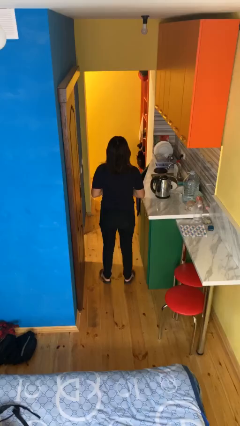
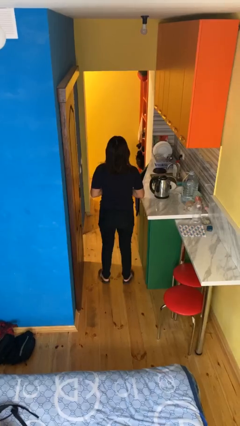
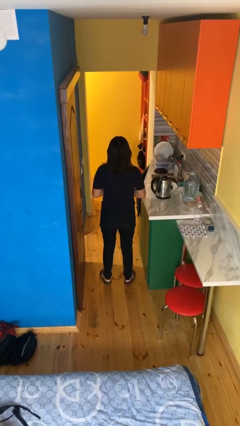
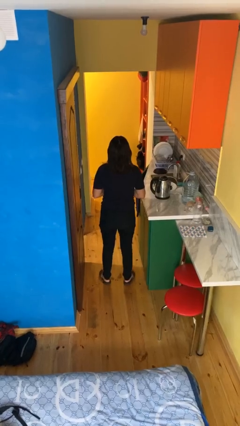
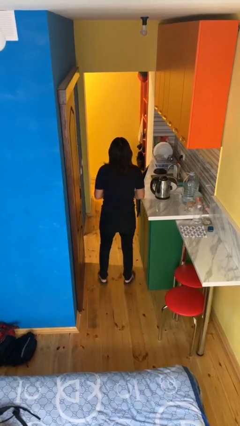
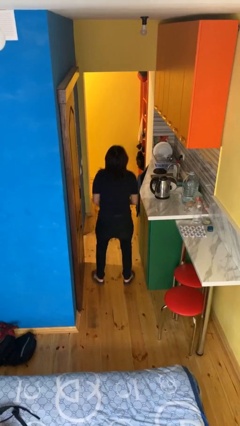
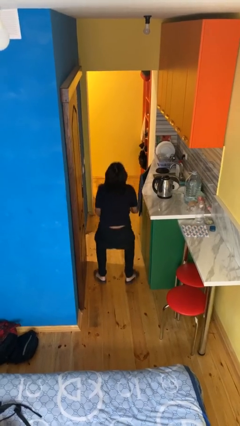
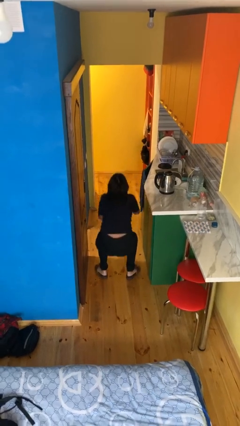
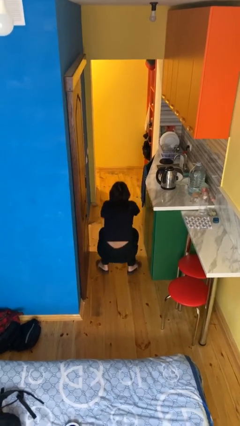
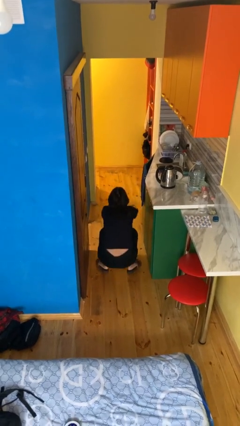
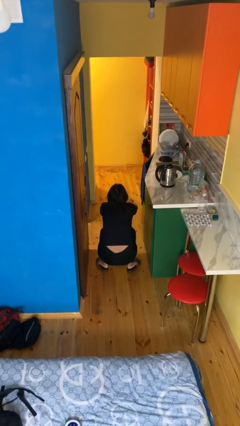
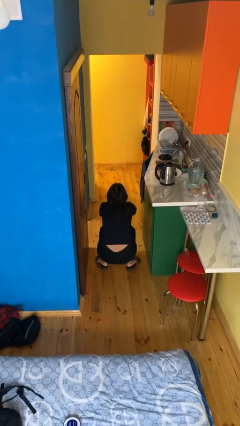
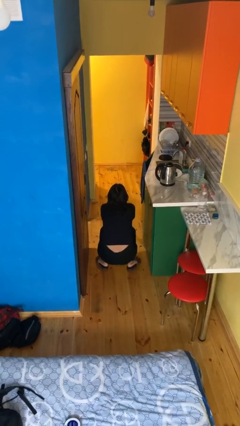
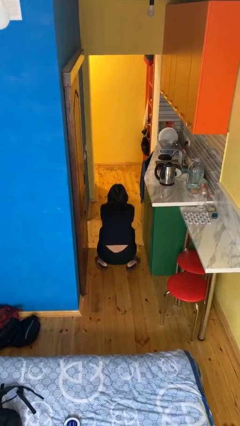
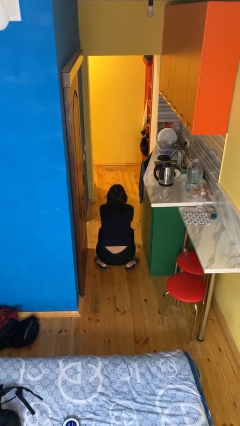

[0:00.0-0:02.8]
person squats

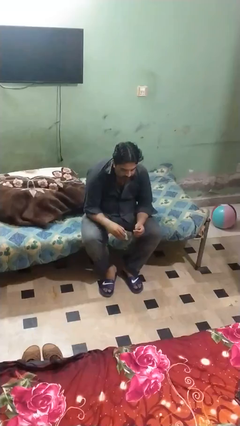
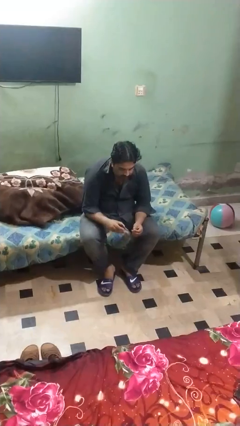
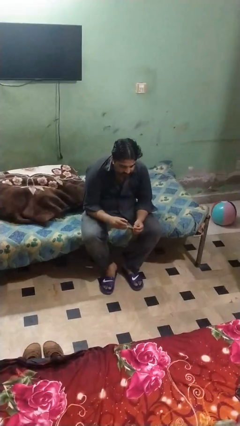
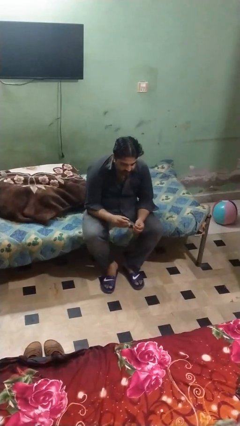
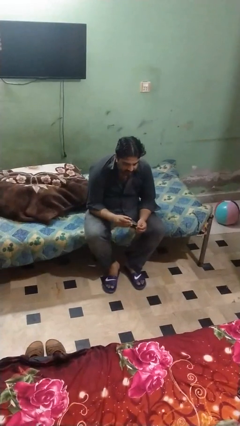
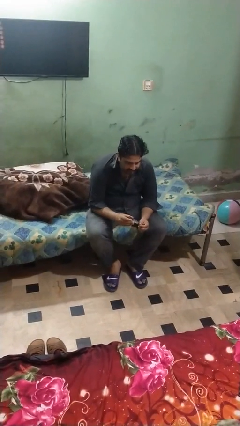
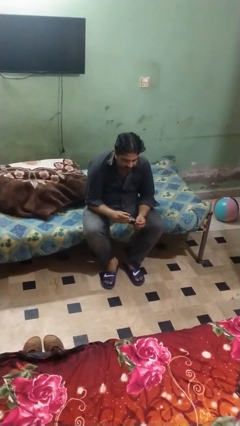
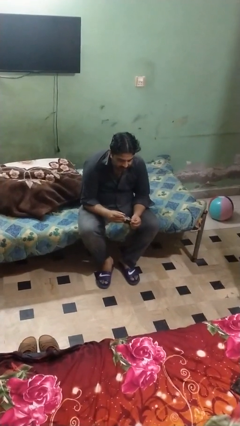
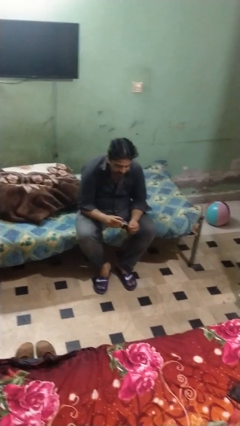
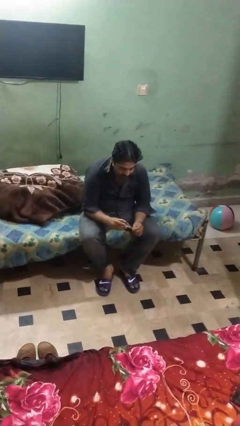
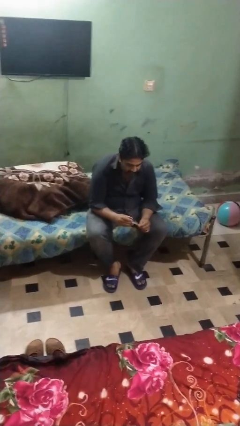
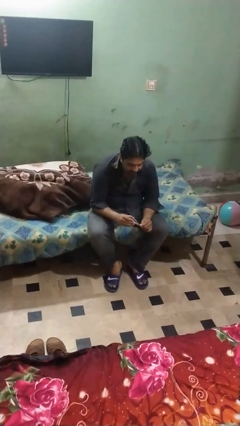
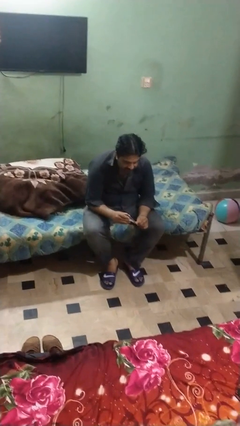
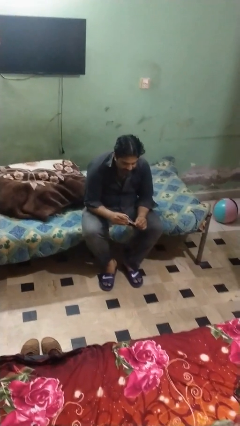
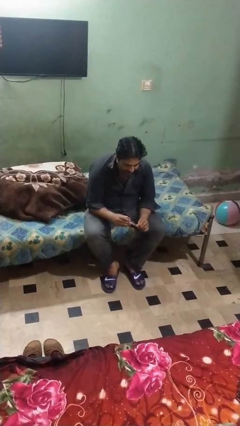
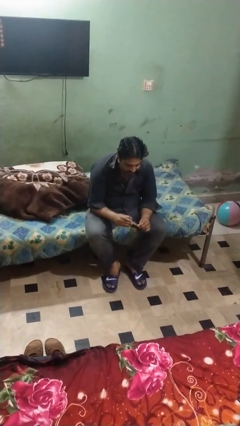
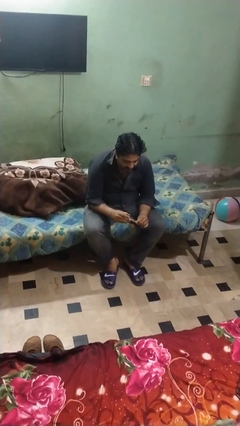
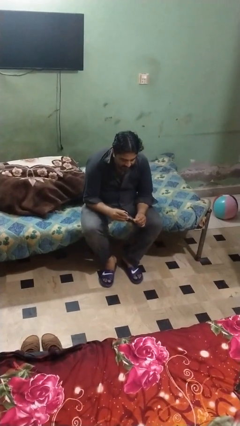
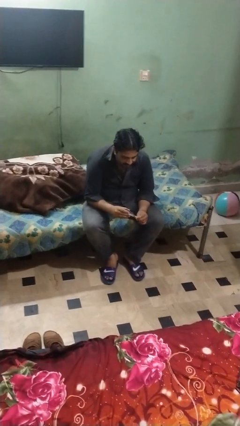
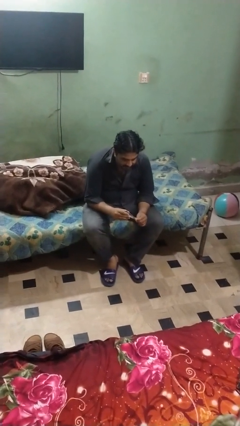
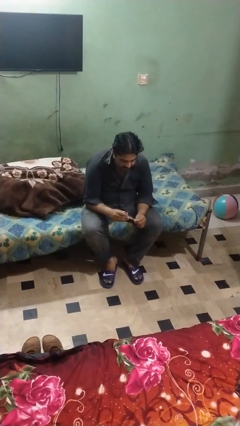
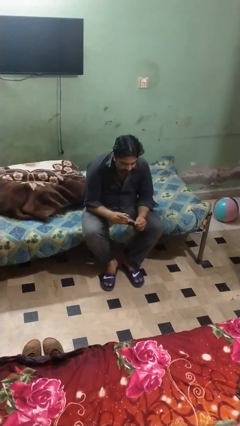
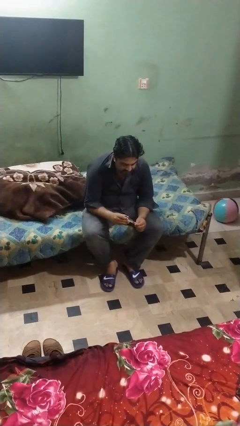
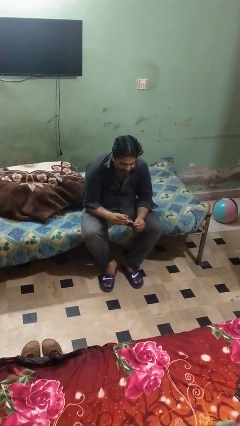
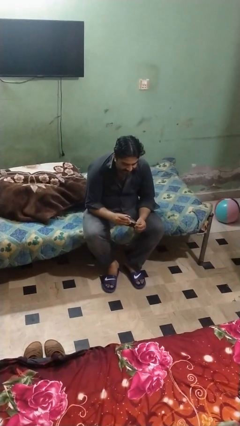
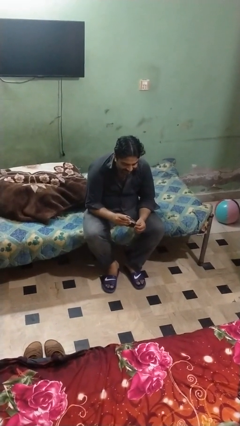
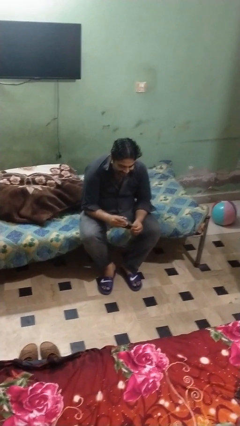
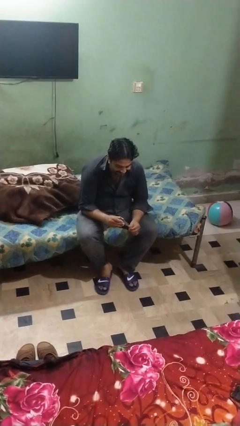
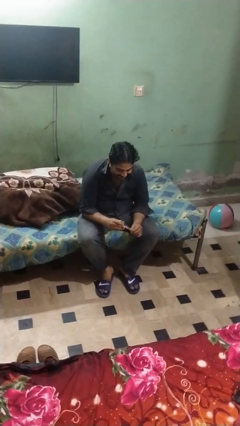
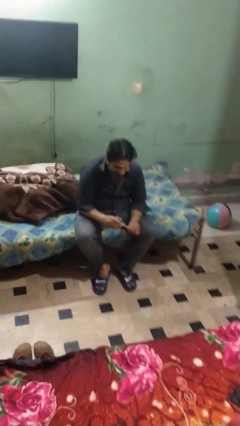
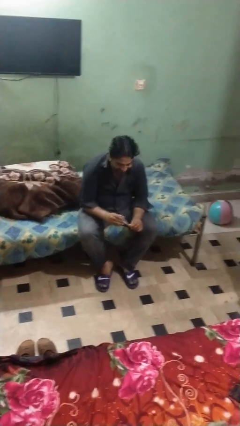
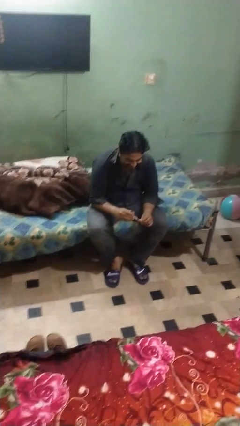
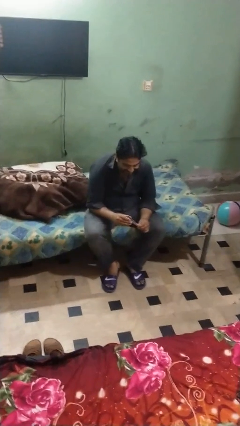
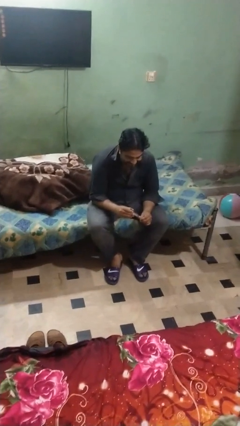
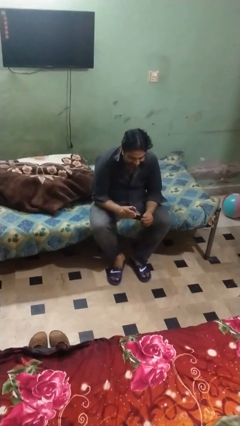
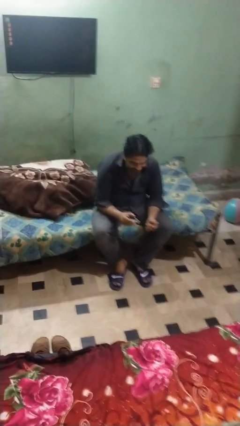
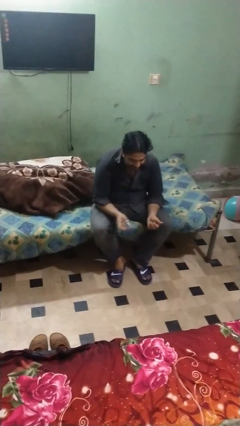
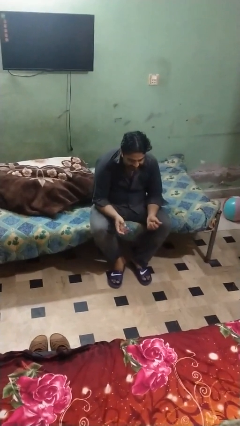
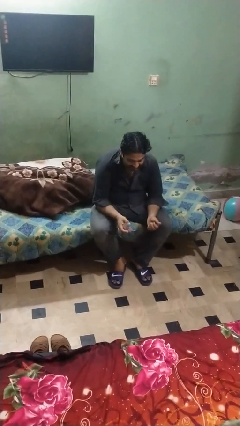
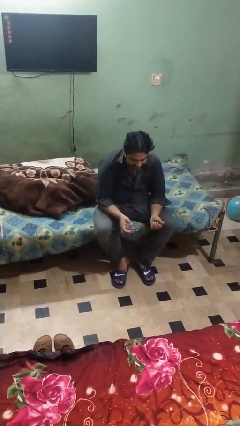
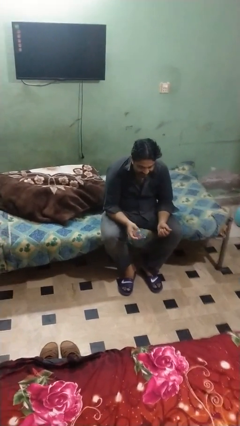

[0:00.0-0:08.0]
person clips fingernails

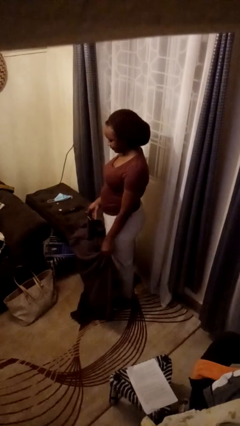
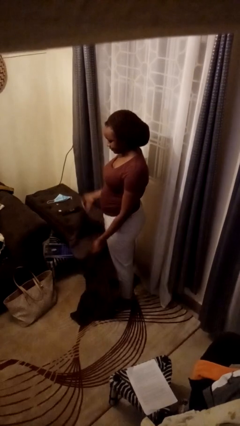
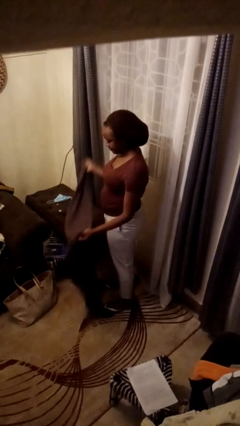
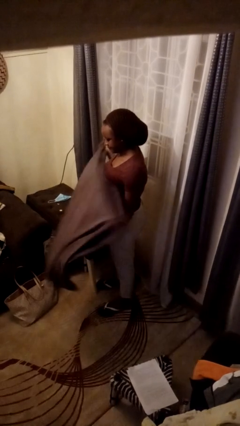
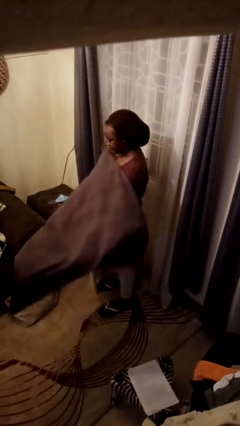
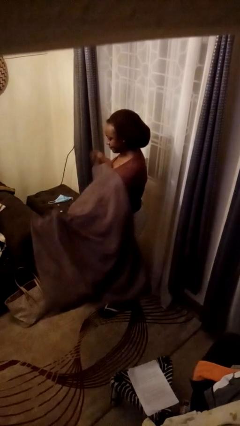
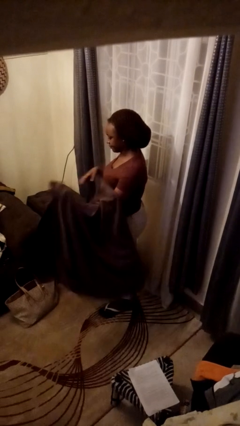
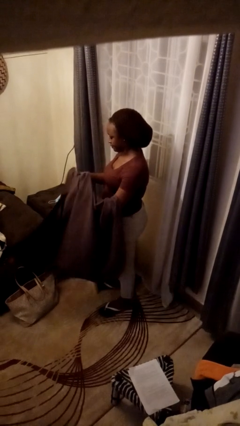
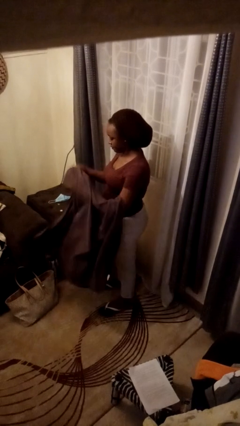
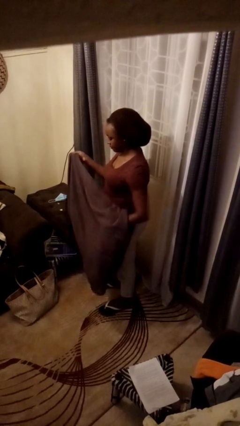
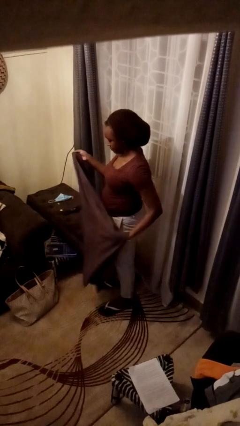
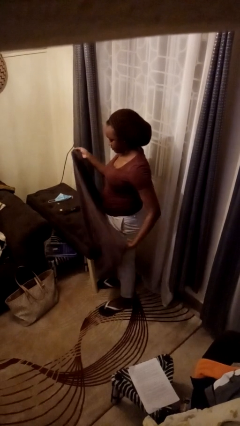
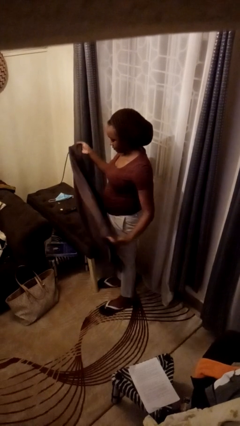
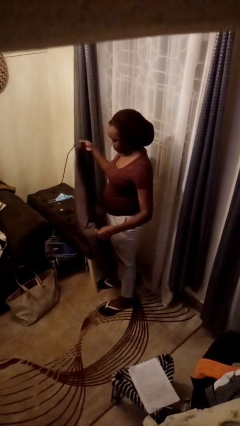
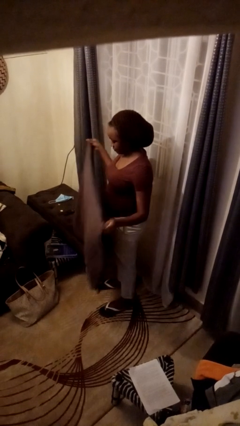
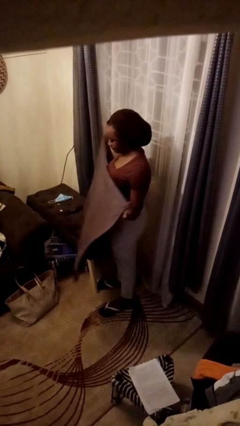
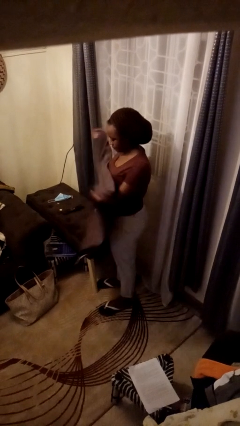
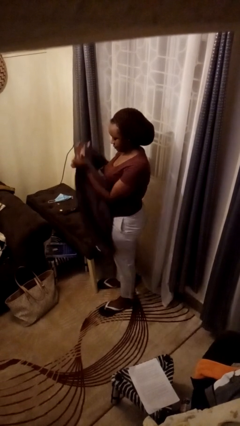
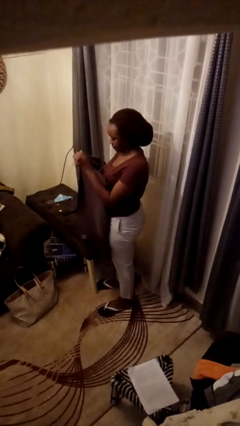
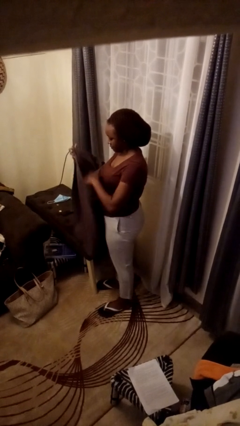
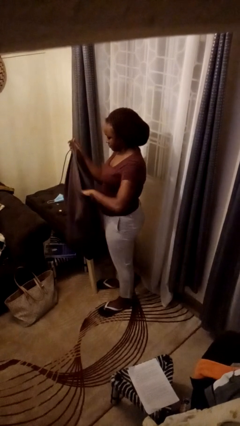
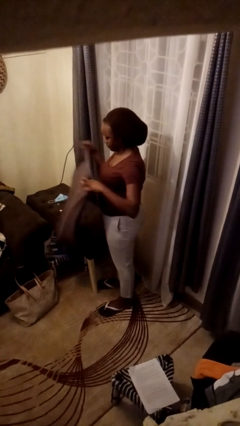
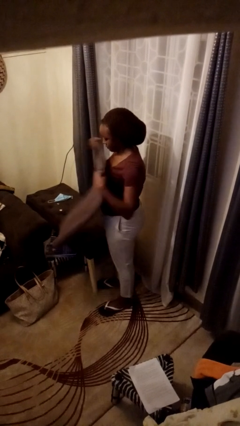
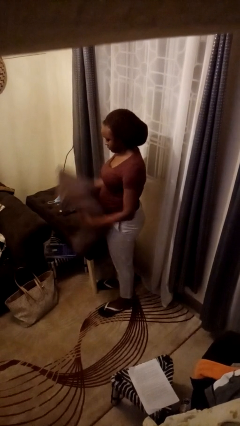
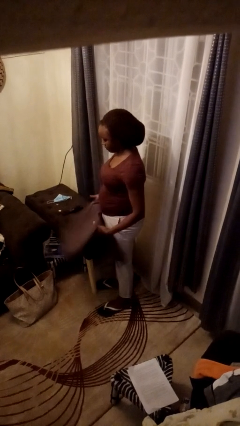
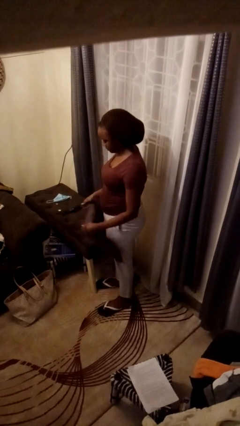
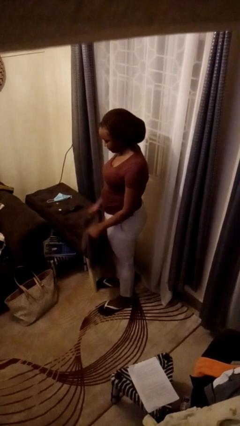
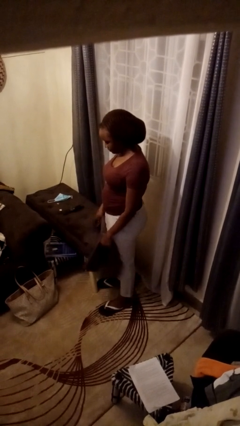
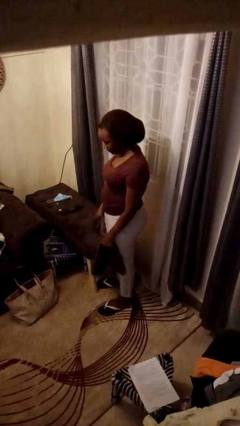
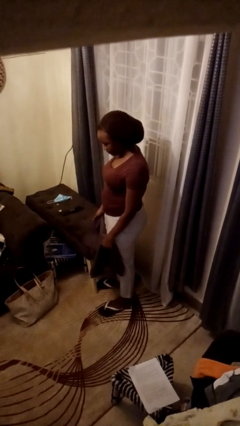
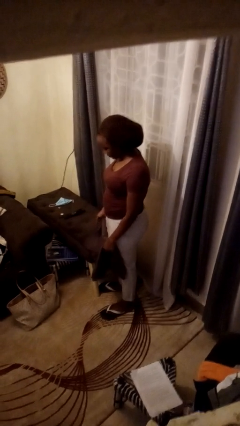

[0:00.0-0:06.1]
person folds blanket

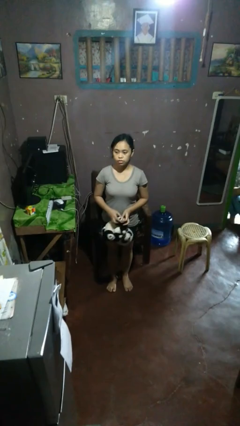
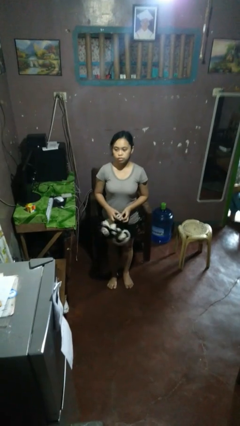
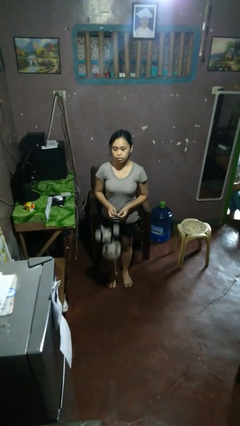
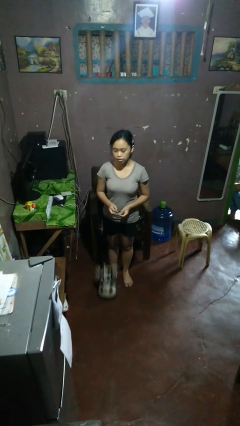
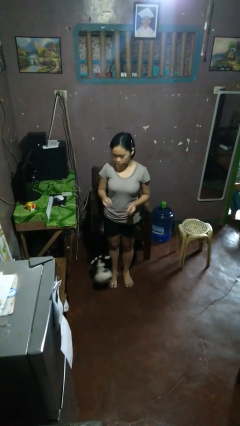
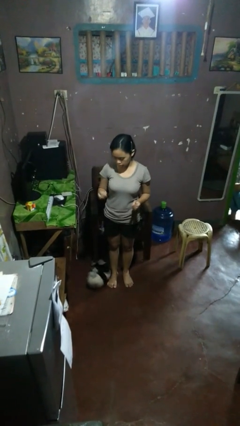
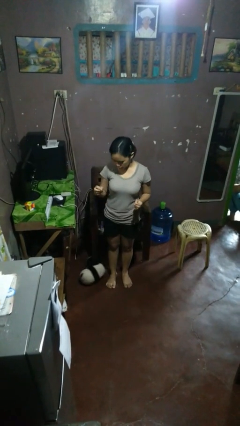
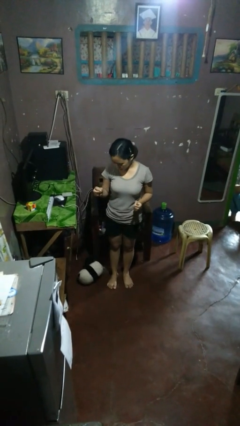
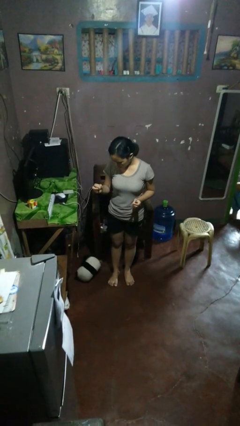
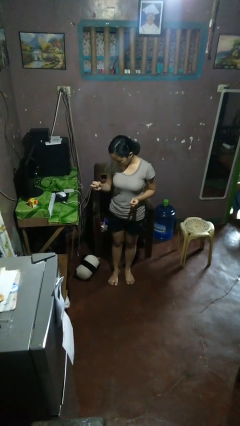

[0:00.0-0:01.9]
person drops object
